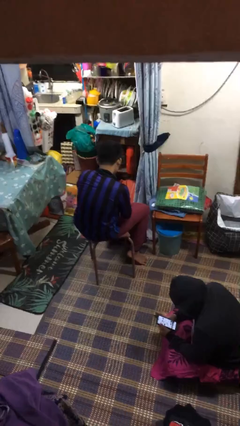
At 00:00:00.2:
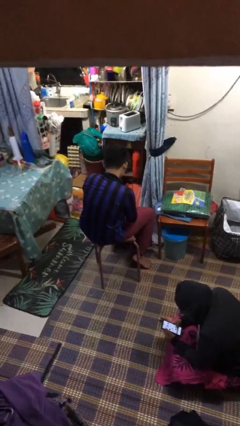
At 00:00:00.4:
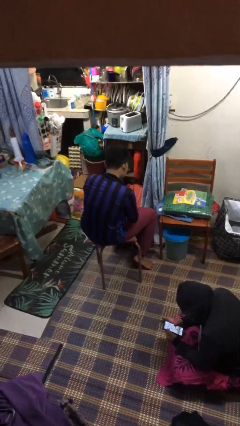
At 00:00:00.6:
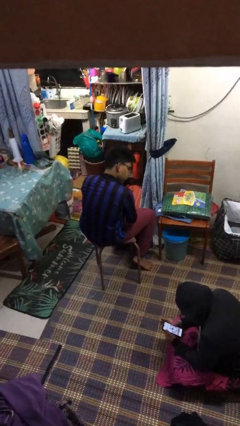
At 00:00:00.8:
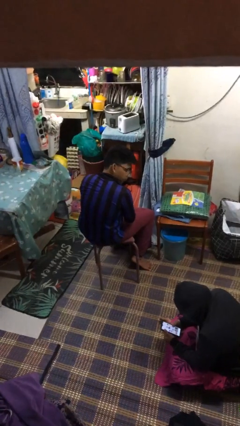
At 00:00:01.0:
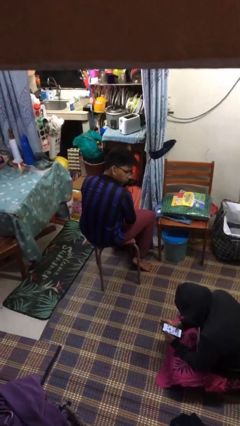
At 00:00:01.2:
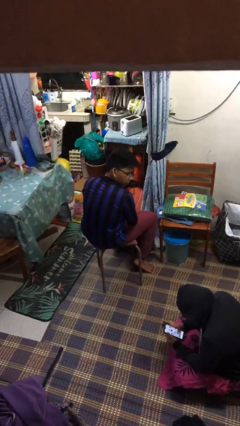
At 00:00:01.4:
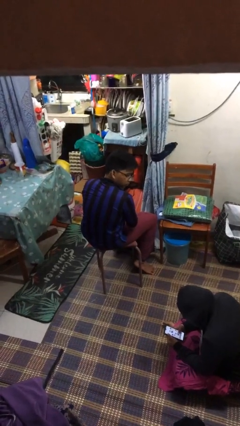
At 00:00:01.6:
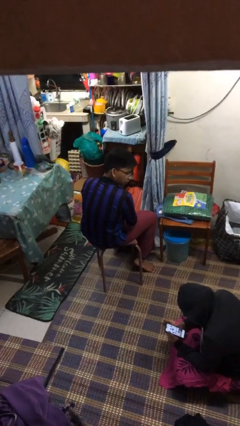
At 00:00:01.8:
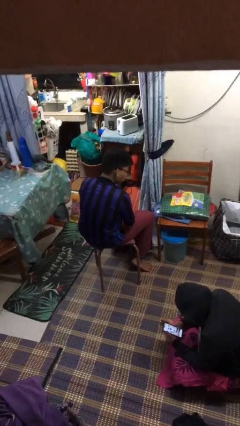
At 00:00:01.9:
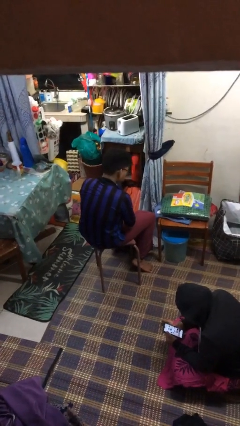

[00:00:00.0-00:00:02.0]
person looks over shoulder

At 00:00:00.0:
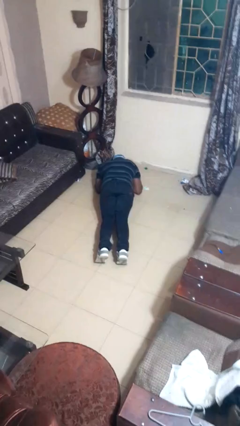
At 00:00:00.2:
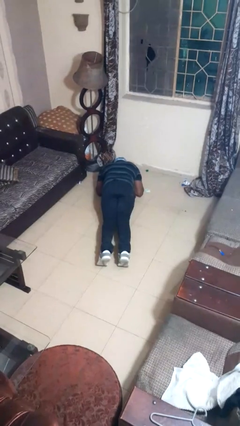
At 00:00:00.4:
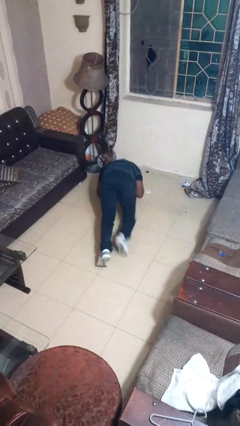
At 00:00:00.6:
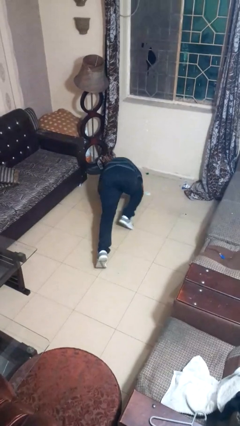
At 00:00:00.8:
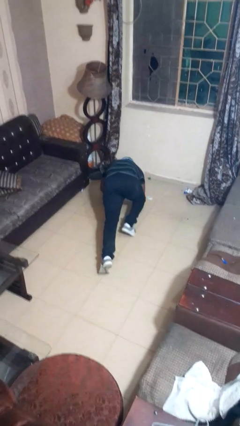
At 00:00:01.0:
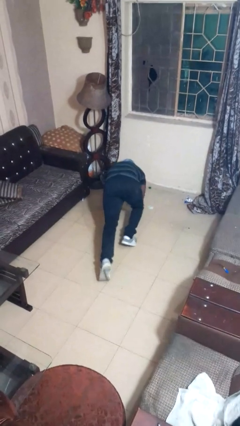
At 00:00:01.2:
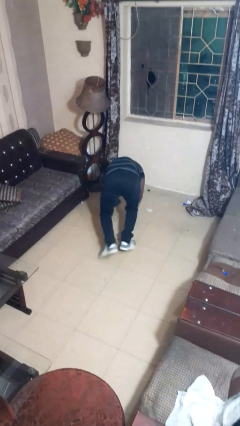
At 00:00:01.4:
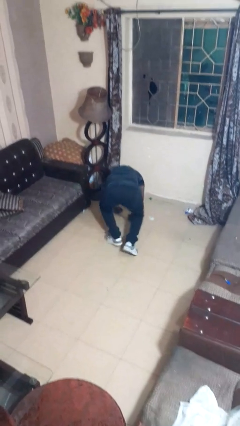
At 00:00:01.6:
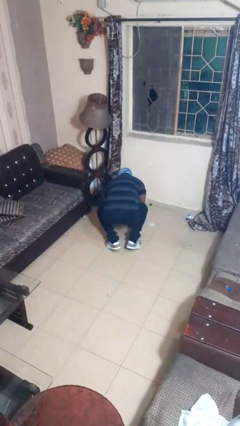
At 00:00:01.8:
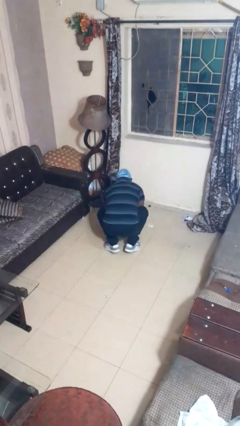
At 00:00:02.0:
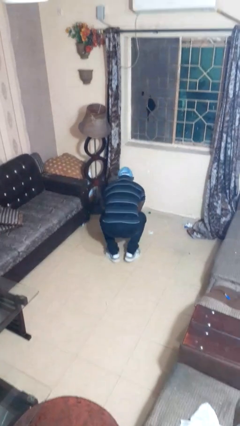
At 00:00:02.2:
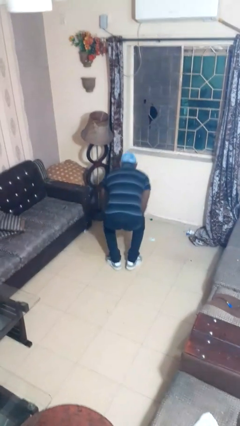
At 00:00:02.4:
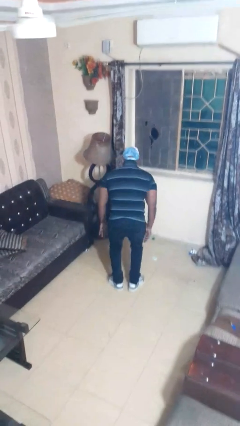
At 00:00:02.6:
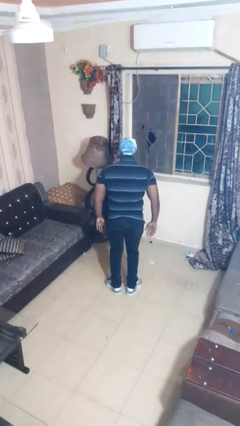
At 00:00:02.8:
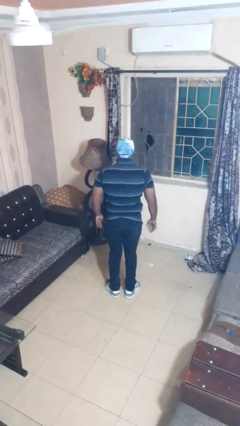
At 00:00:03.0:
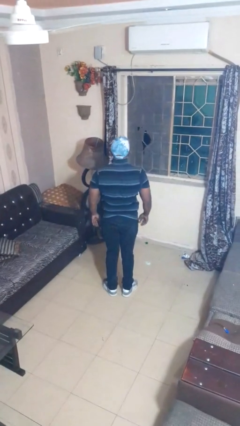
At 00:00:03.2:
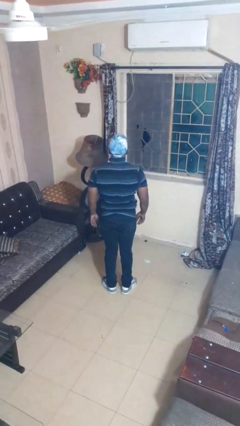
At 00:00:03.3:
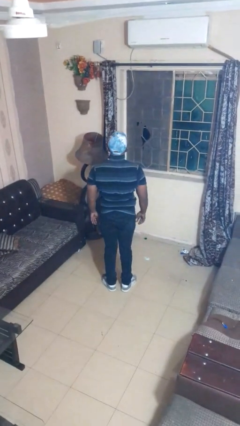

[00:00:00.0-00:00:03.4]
person stands up from floor

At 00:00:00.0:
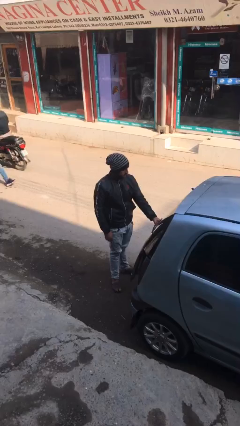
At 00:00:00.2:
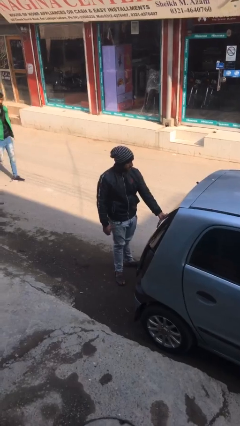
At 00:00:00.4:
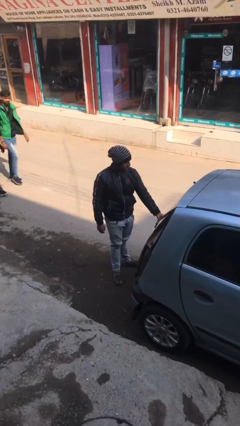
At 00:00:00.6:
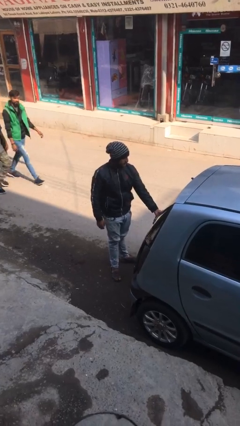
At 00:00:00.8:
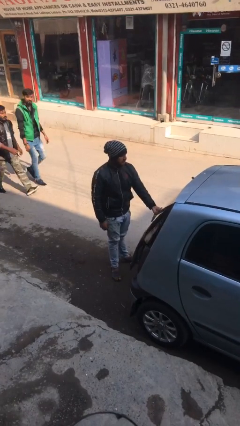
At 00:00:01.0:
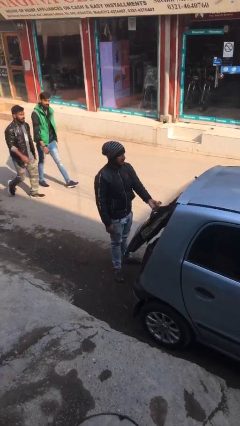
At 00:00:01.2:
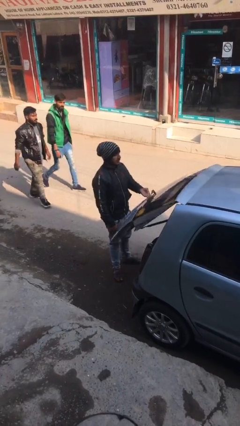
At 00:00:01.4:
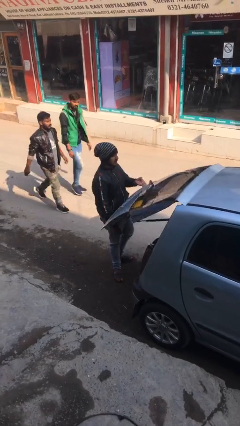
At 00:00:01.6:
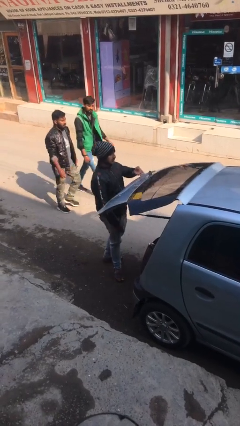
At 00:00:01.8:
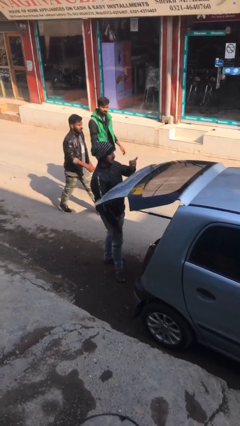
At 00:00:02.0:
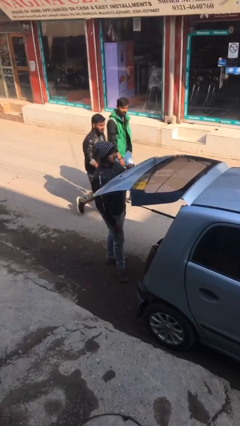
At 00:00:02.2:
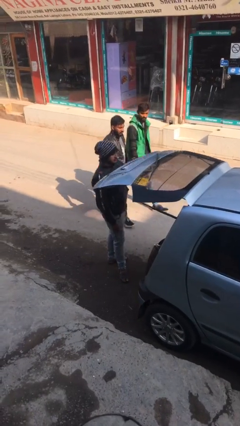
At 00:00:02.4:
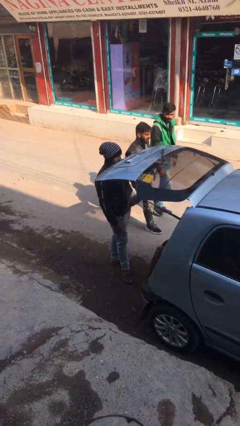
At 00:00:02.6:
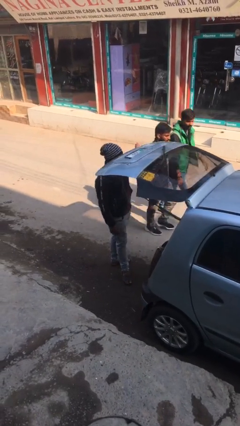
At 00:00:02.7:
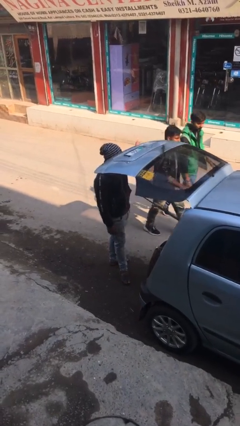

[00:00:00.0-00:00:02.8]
person opens car trunk

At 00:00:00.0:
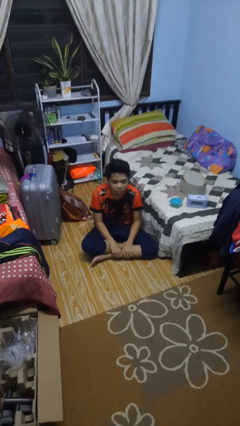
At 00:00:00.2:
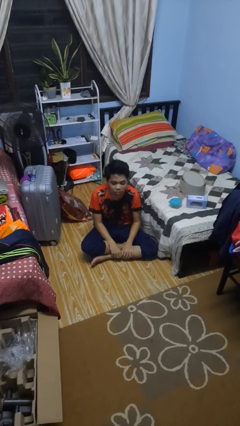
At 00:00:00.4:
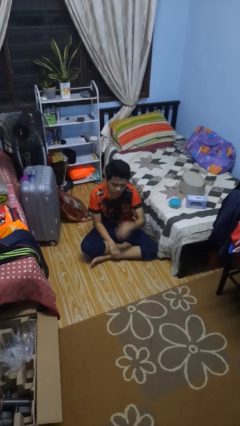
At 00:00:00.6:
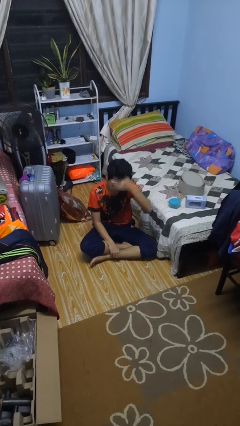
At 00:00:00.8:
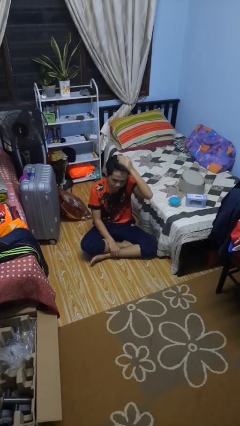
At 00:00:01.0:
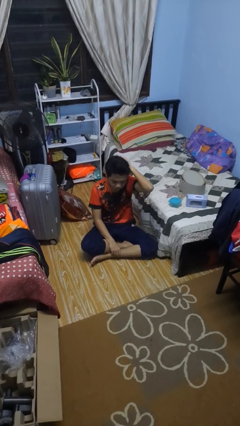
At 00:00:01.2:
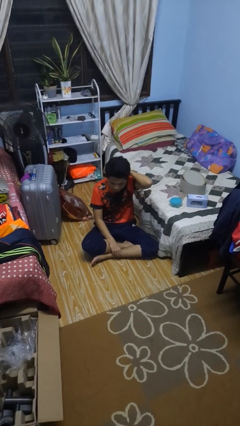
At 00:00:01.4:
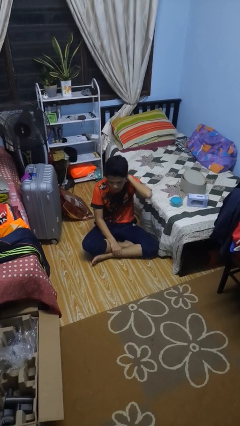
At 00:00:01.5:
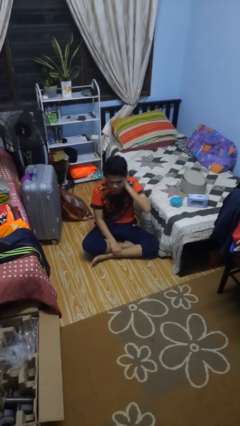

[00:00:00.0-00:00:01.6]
person strokes hair

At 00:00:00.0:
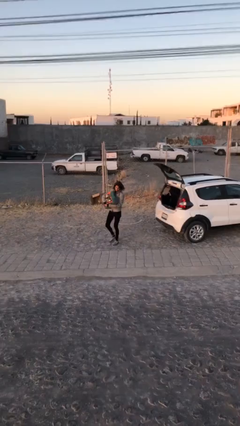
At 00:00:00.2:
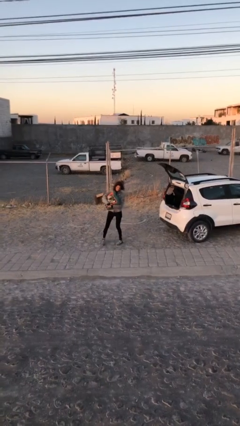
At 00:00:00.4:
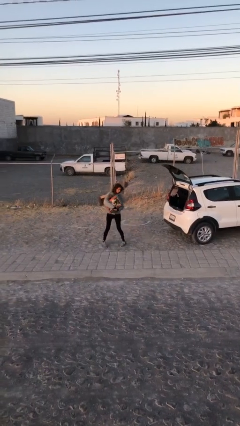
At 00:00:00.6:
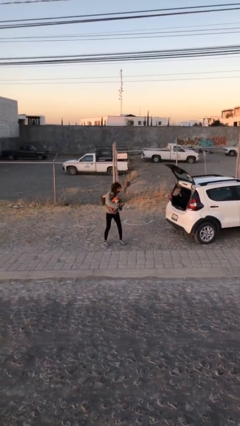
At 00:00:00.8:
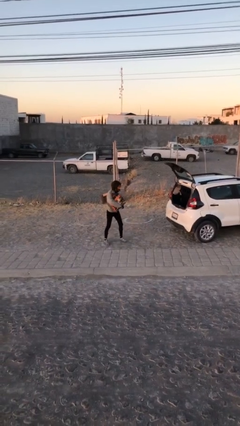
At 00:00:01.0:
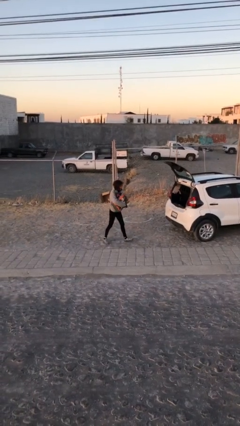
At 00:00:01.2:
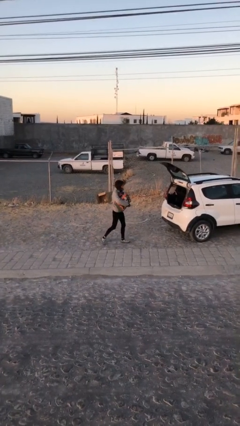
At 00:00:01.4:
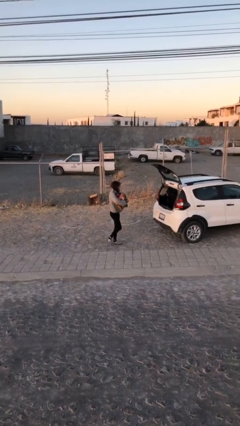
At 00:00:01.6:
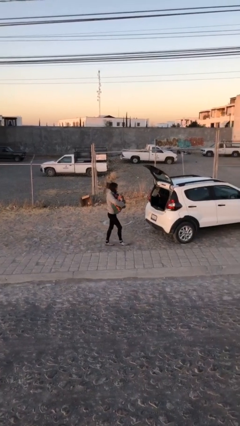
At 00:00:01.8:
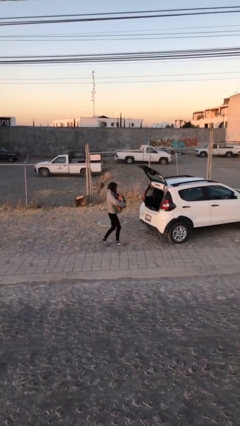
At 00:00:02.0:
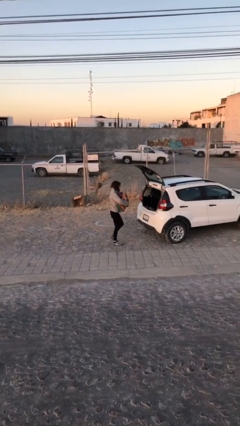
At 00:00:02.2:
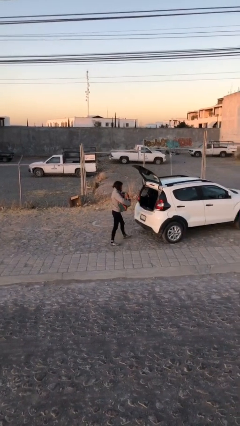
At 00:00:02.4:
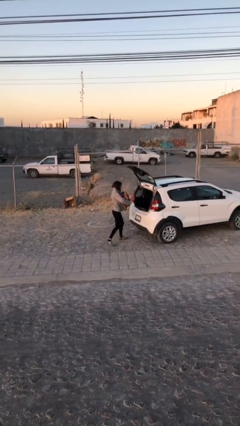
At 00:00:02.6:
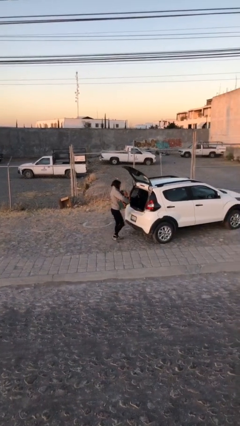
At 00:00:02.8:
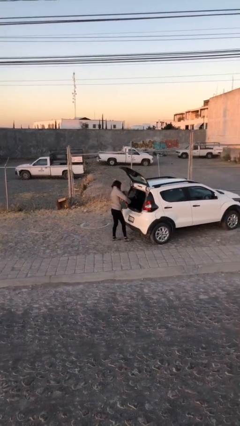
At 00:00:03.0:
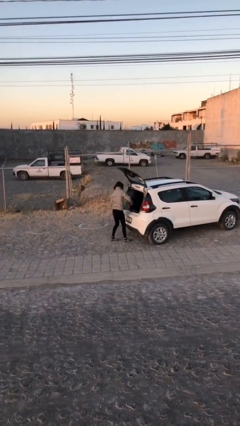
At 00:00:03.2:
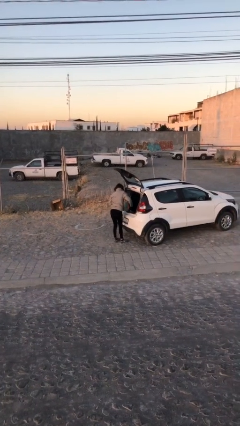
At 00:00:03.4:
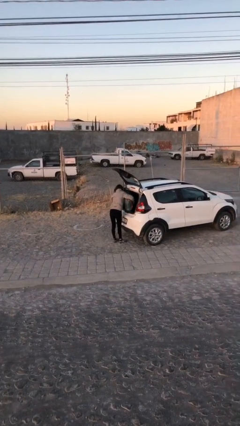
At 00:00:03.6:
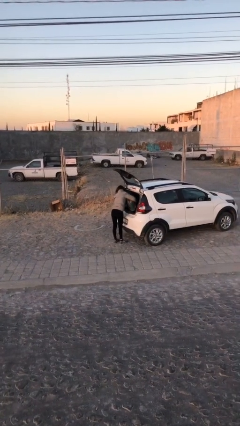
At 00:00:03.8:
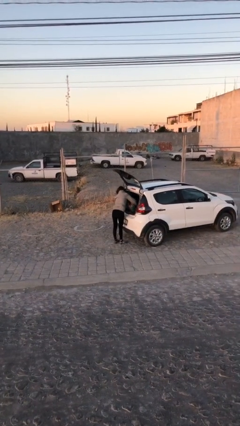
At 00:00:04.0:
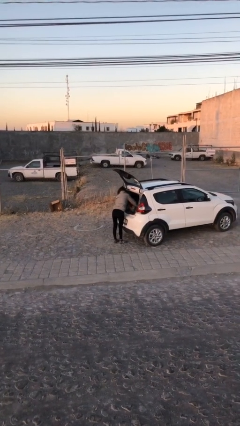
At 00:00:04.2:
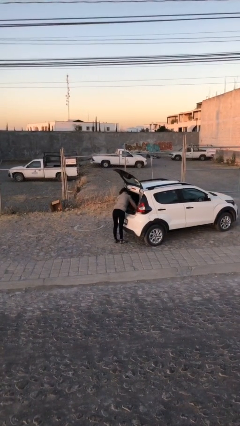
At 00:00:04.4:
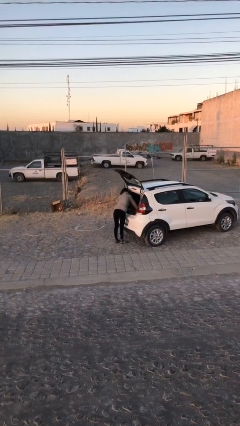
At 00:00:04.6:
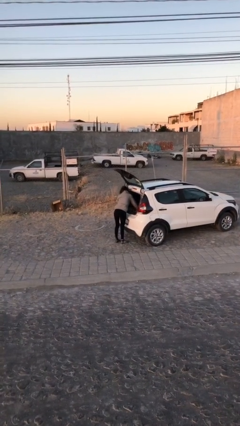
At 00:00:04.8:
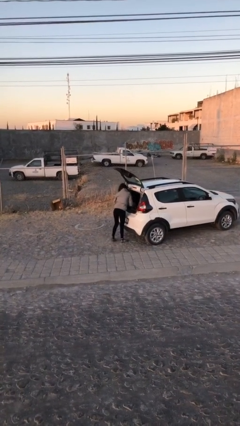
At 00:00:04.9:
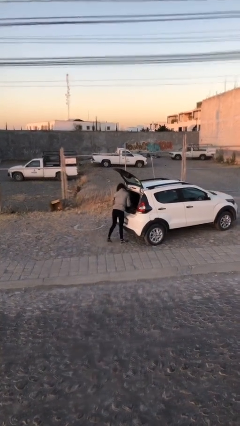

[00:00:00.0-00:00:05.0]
person loads car

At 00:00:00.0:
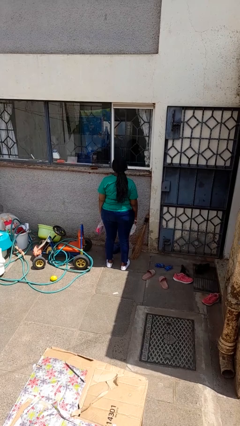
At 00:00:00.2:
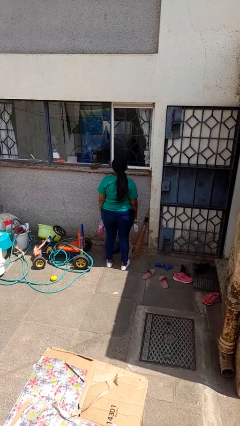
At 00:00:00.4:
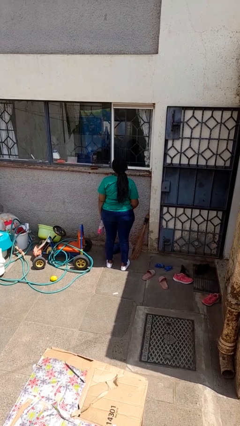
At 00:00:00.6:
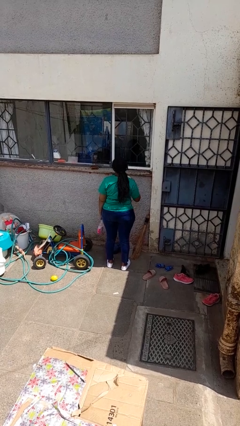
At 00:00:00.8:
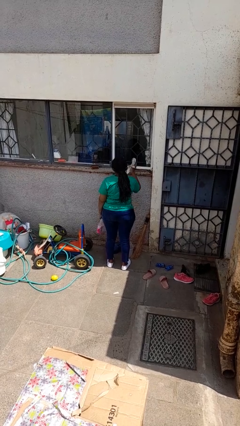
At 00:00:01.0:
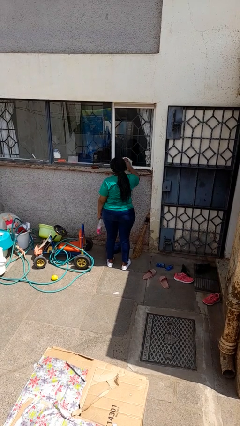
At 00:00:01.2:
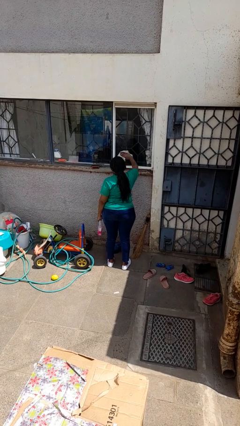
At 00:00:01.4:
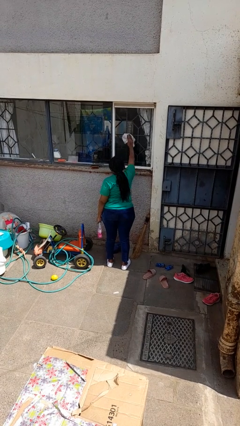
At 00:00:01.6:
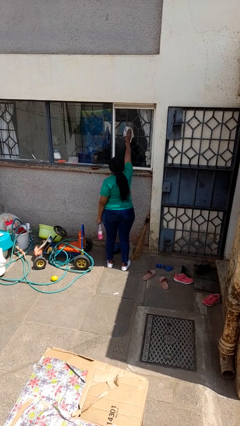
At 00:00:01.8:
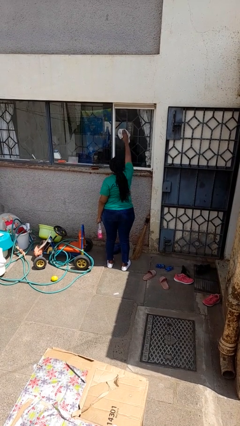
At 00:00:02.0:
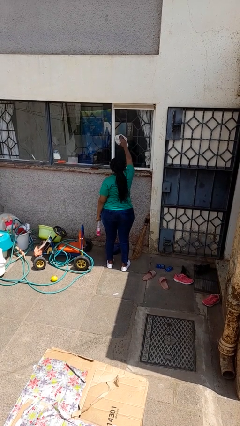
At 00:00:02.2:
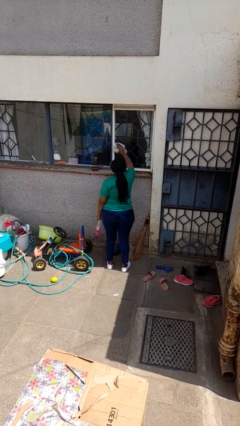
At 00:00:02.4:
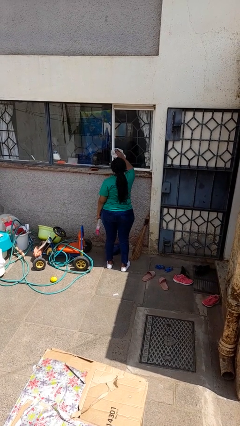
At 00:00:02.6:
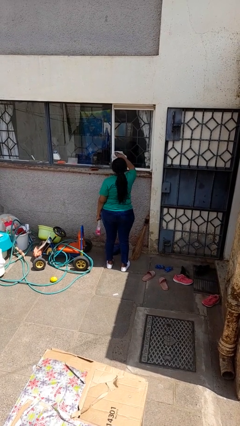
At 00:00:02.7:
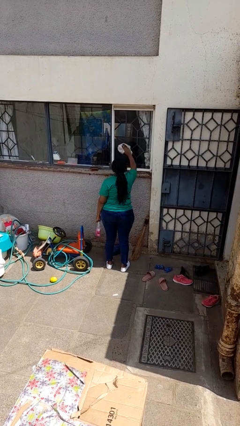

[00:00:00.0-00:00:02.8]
person washes window
